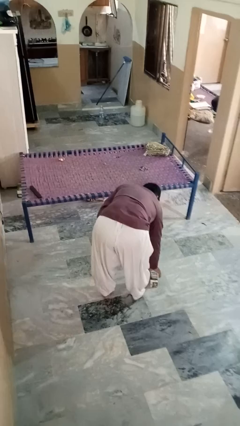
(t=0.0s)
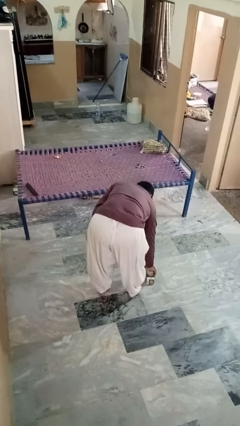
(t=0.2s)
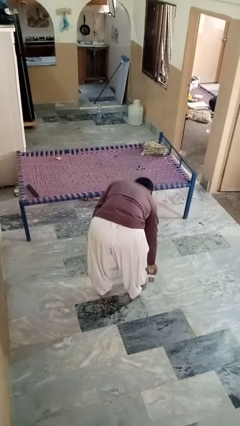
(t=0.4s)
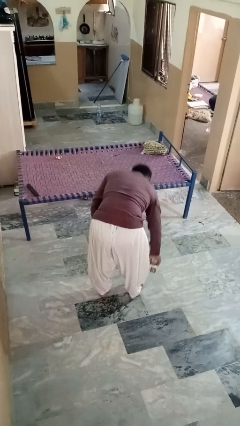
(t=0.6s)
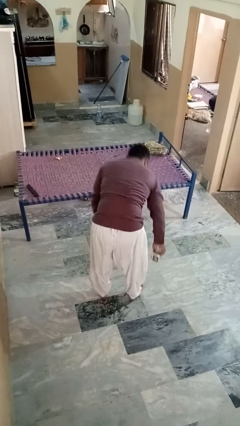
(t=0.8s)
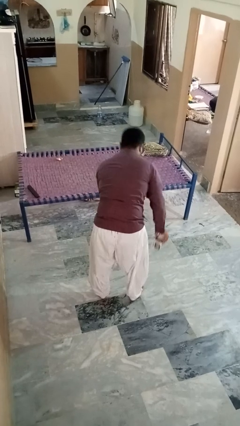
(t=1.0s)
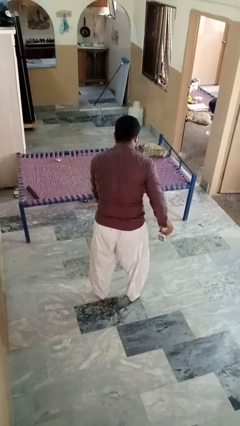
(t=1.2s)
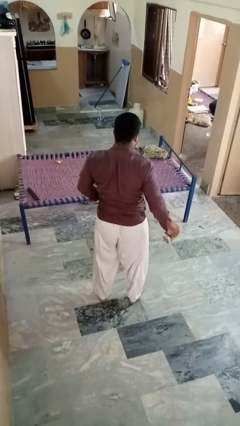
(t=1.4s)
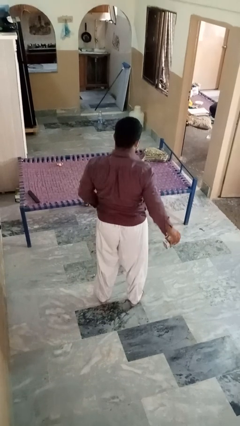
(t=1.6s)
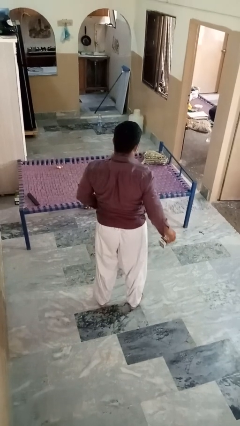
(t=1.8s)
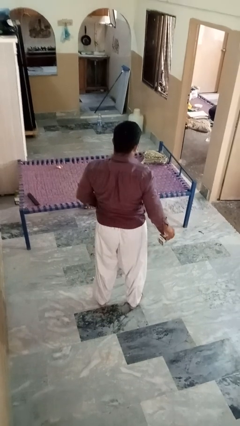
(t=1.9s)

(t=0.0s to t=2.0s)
person picks up object from floor

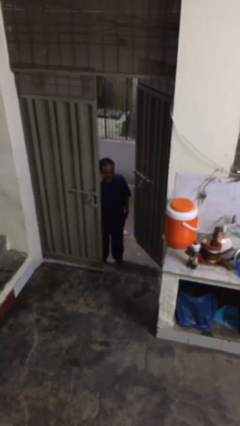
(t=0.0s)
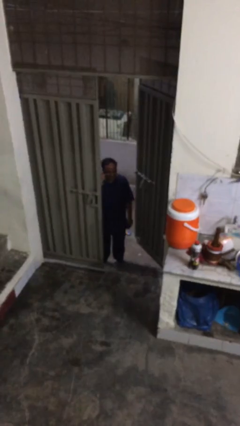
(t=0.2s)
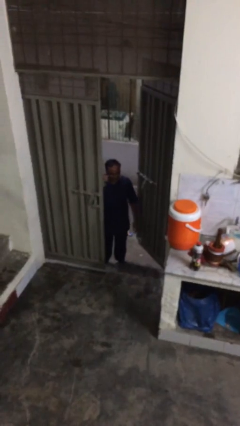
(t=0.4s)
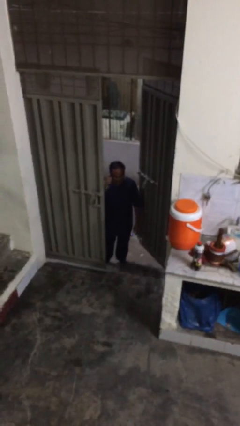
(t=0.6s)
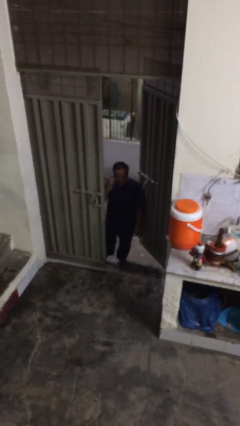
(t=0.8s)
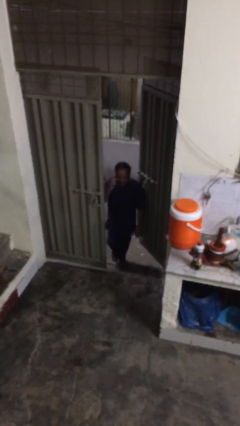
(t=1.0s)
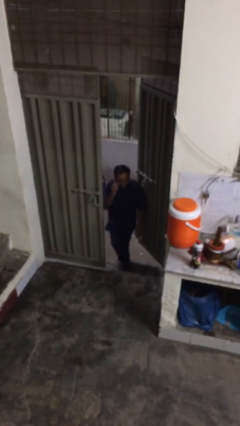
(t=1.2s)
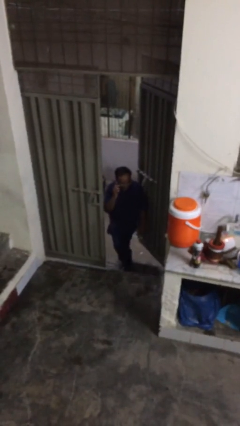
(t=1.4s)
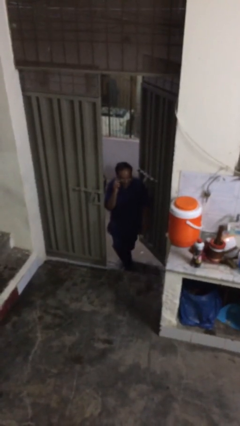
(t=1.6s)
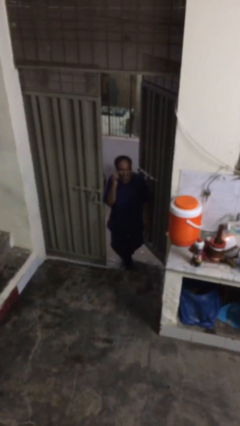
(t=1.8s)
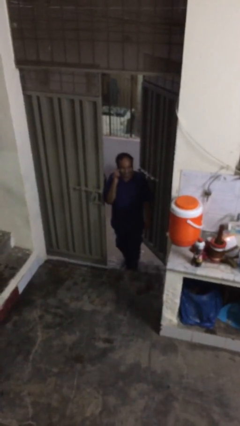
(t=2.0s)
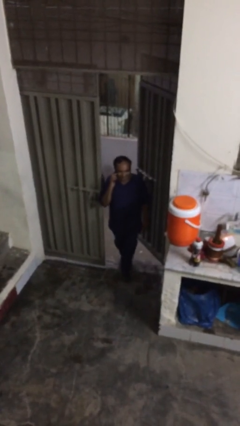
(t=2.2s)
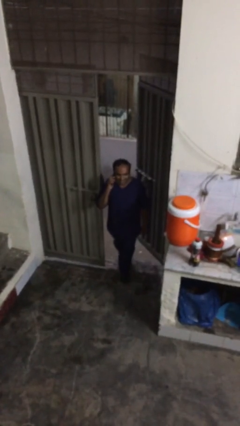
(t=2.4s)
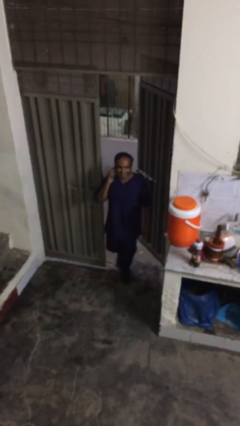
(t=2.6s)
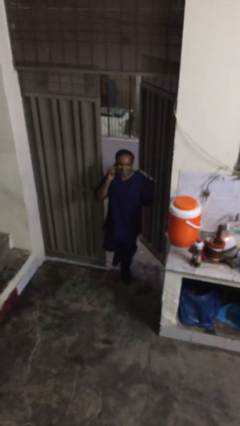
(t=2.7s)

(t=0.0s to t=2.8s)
person enters scene through structure

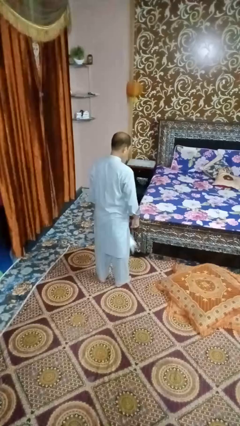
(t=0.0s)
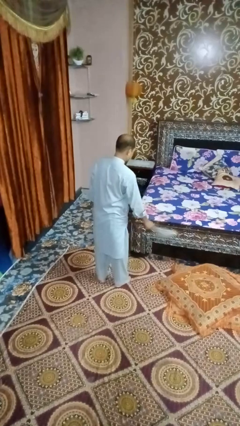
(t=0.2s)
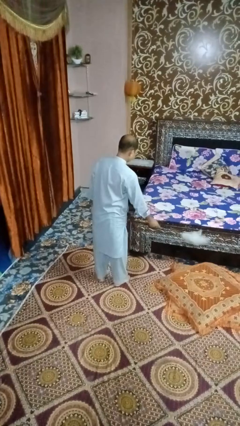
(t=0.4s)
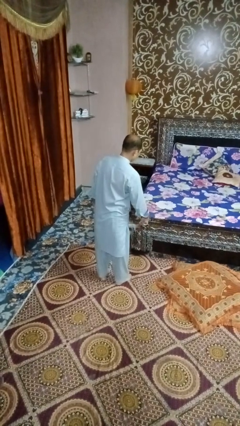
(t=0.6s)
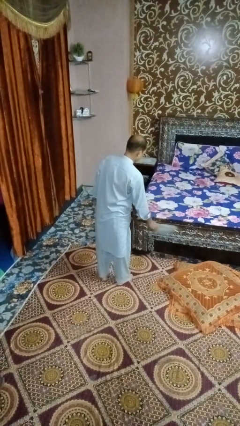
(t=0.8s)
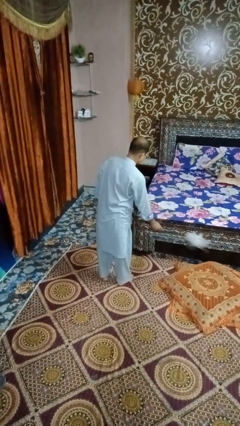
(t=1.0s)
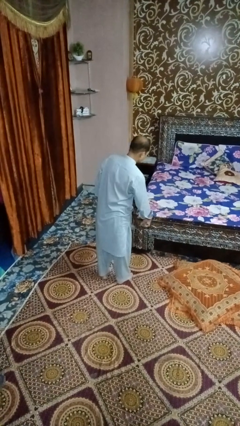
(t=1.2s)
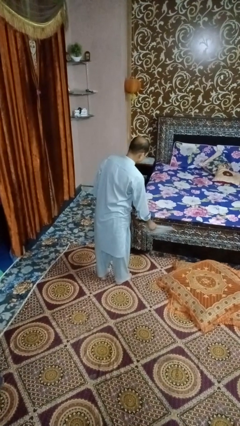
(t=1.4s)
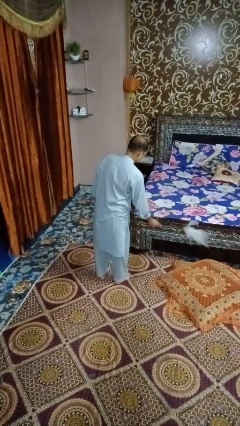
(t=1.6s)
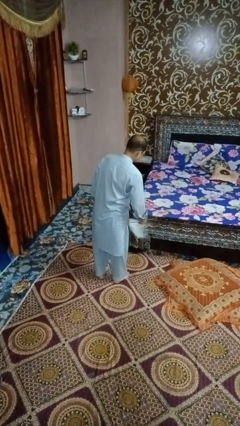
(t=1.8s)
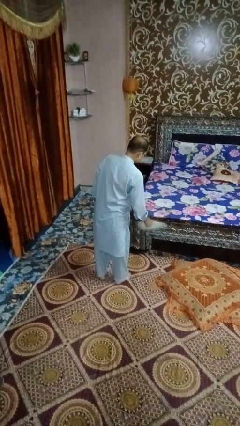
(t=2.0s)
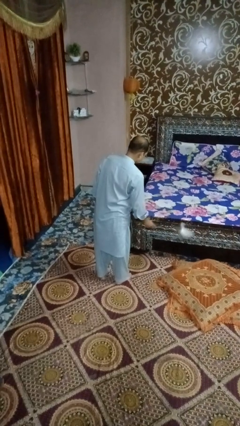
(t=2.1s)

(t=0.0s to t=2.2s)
person dusts furniture

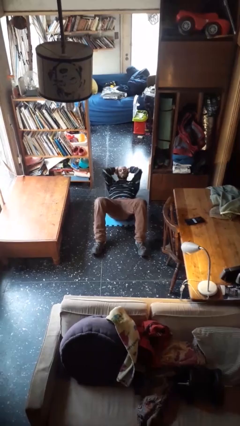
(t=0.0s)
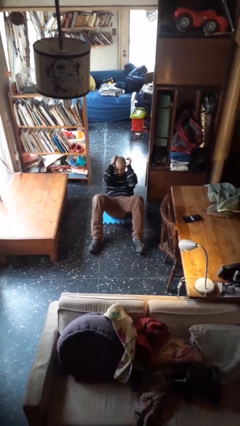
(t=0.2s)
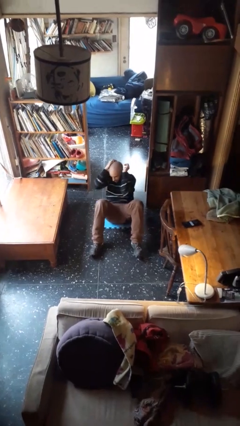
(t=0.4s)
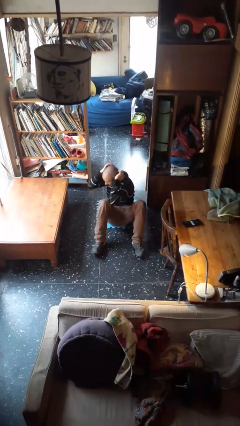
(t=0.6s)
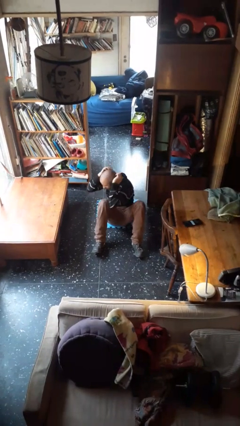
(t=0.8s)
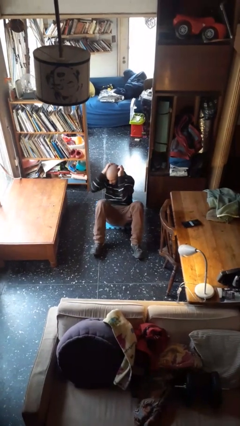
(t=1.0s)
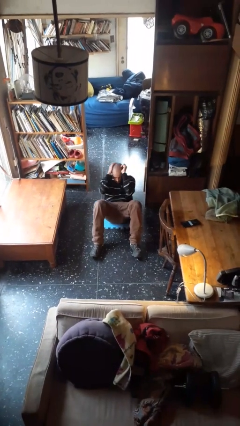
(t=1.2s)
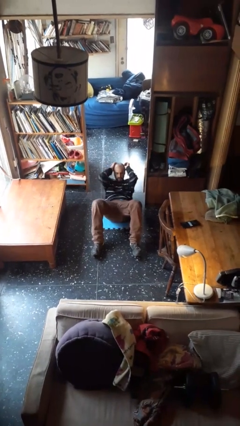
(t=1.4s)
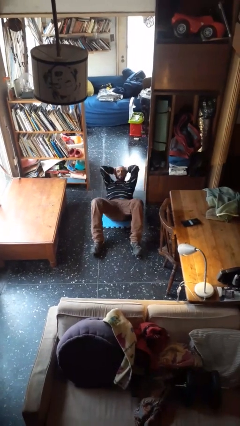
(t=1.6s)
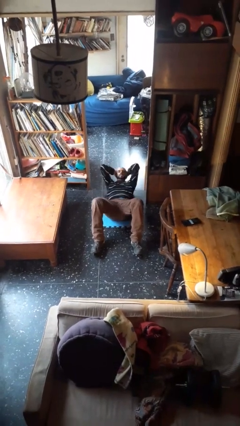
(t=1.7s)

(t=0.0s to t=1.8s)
person exercises with situp

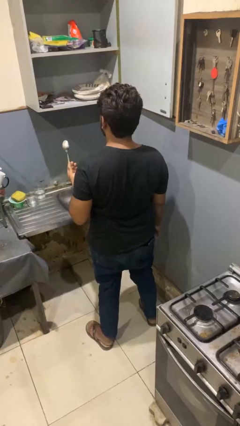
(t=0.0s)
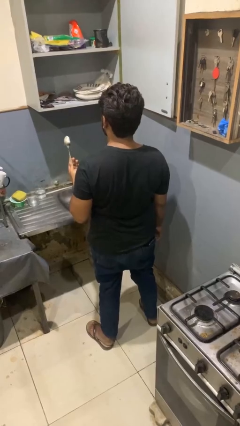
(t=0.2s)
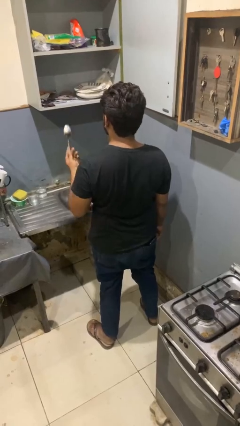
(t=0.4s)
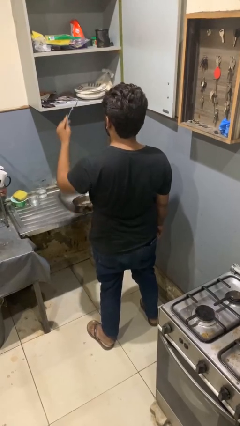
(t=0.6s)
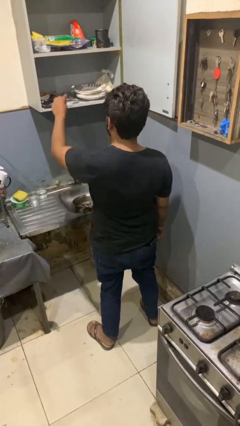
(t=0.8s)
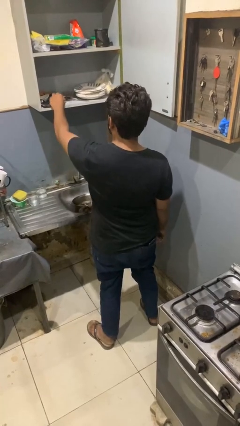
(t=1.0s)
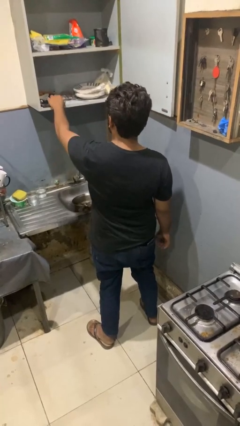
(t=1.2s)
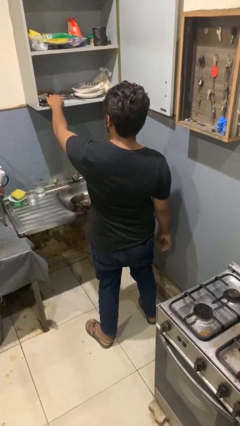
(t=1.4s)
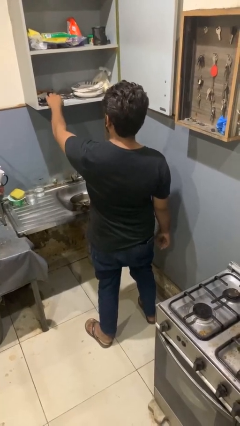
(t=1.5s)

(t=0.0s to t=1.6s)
person puts object into kitchen drawer

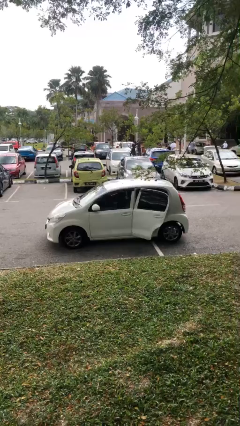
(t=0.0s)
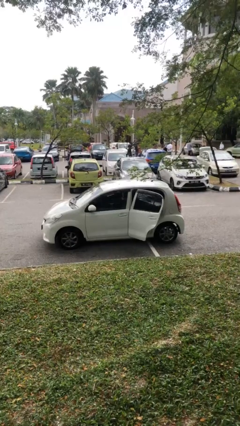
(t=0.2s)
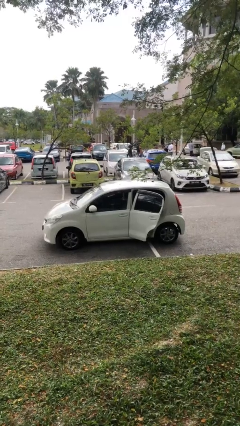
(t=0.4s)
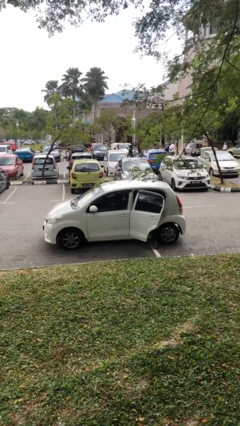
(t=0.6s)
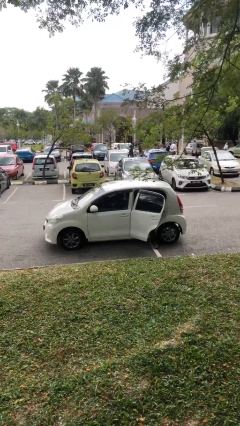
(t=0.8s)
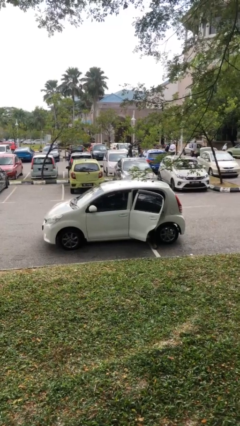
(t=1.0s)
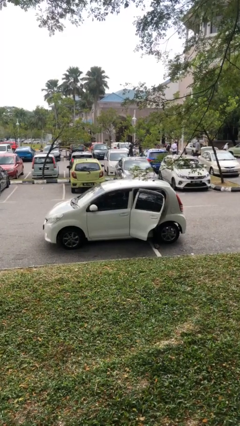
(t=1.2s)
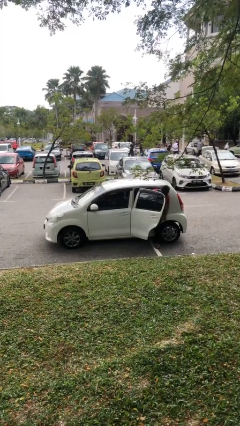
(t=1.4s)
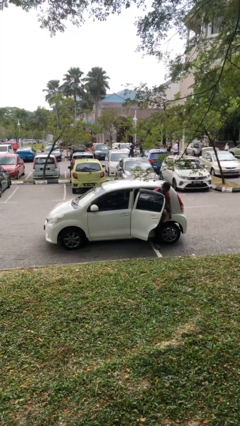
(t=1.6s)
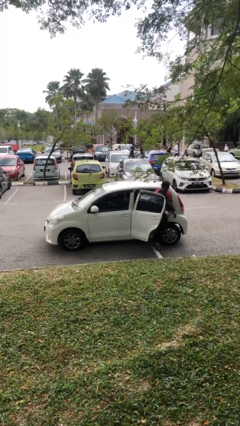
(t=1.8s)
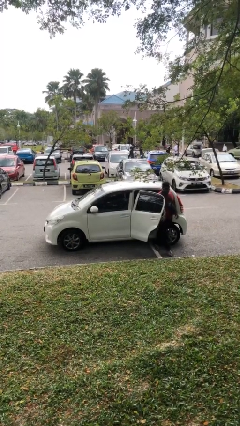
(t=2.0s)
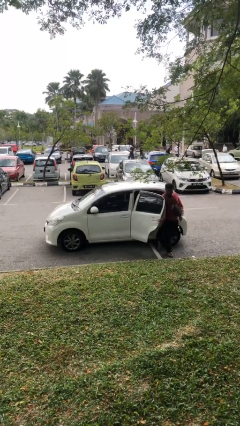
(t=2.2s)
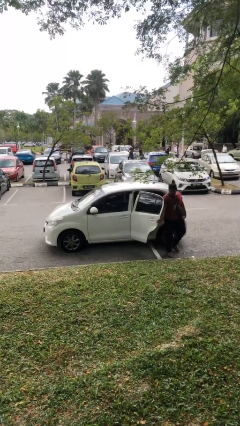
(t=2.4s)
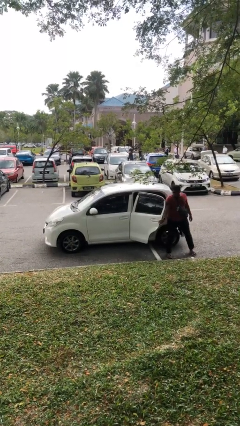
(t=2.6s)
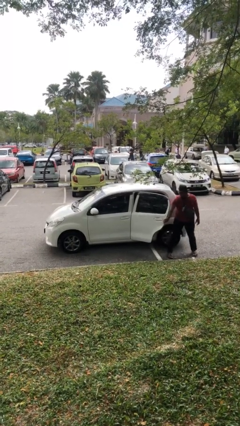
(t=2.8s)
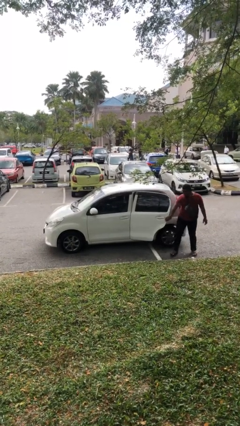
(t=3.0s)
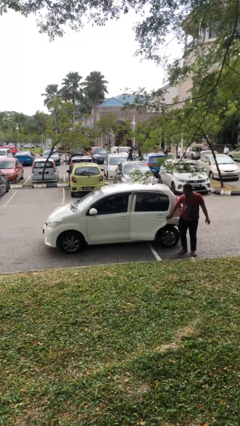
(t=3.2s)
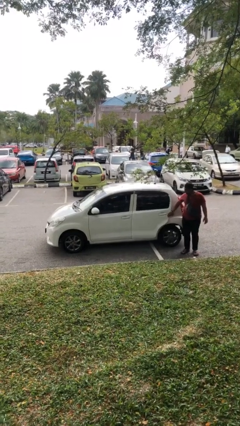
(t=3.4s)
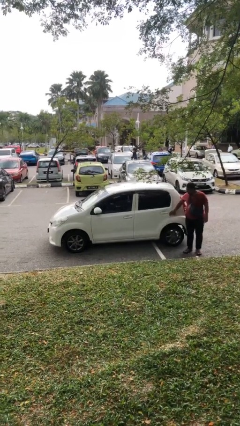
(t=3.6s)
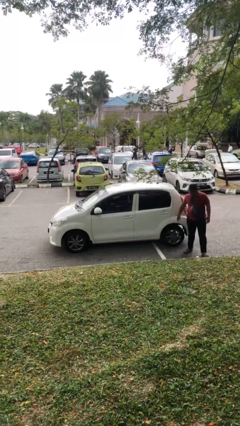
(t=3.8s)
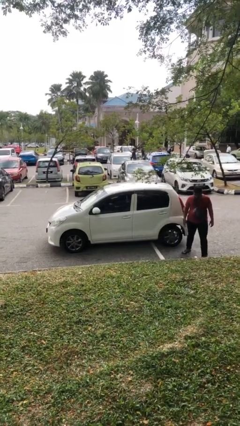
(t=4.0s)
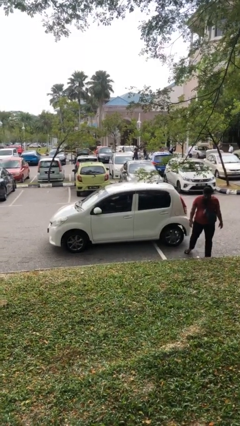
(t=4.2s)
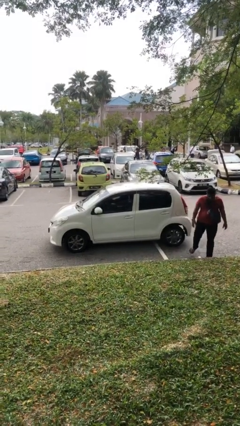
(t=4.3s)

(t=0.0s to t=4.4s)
car drops off person

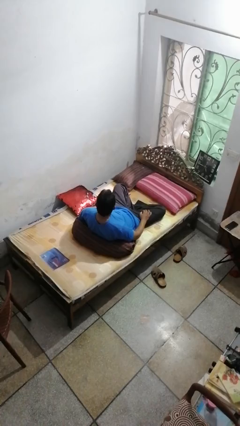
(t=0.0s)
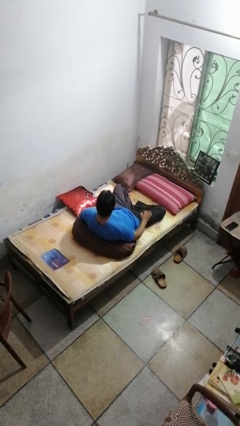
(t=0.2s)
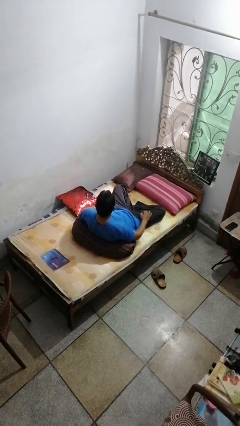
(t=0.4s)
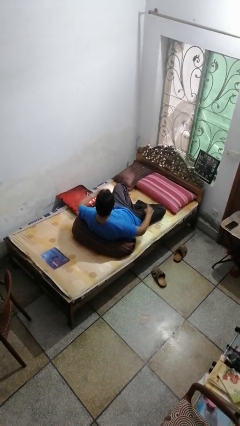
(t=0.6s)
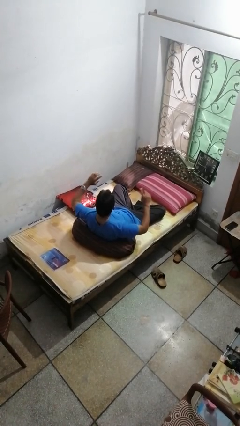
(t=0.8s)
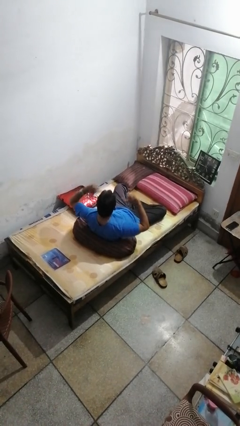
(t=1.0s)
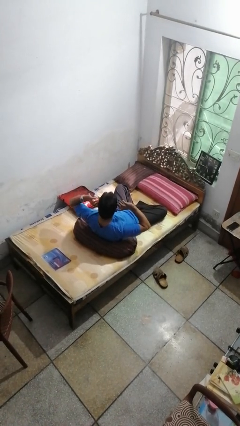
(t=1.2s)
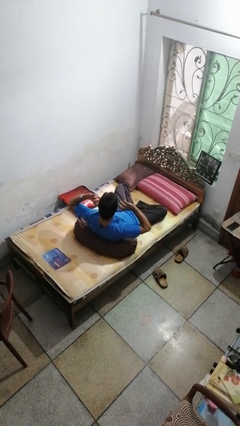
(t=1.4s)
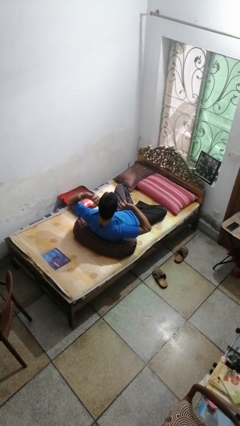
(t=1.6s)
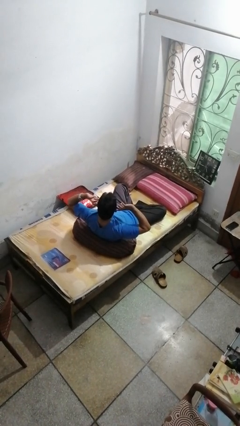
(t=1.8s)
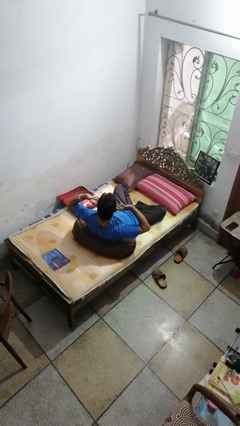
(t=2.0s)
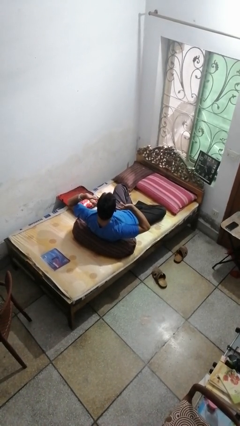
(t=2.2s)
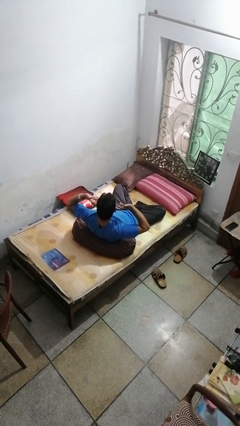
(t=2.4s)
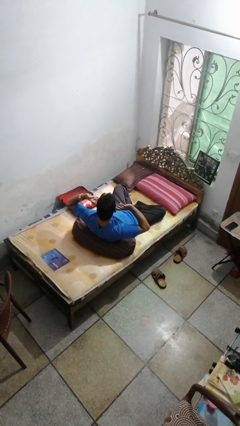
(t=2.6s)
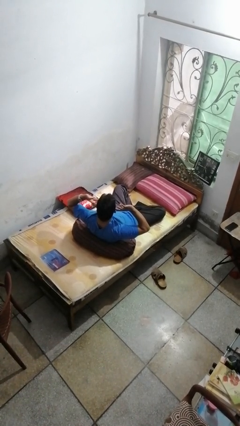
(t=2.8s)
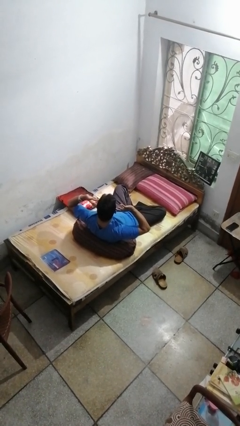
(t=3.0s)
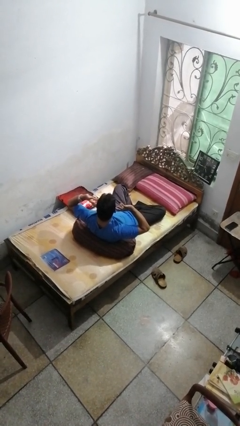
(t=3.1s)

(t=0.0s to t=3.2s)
person puts fingers in ear
